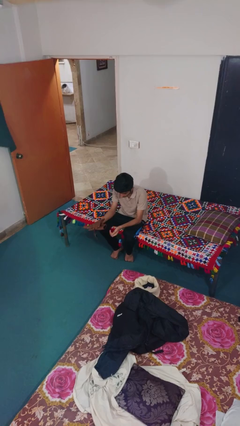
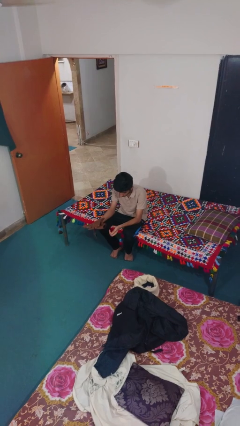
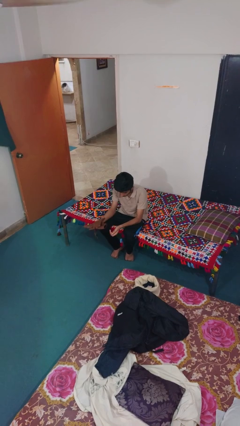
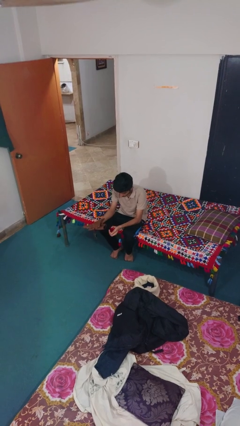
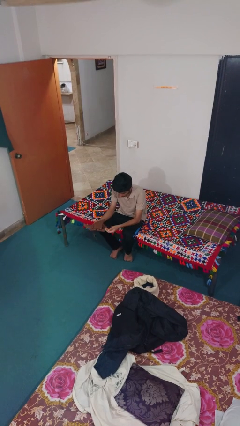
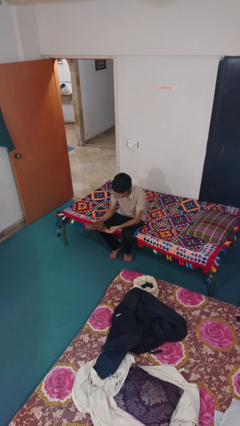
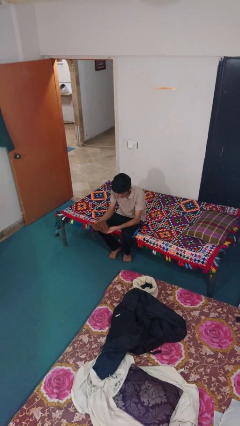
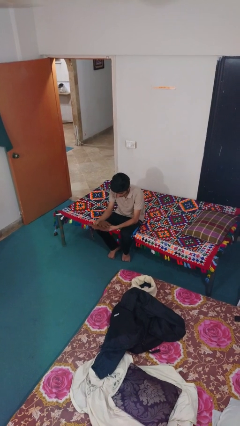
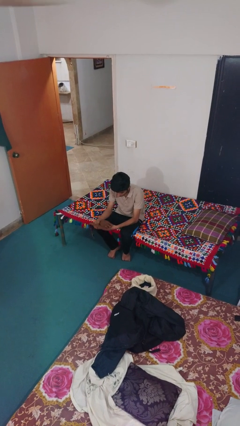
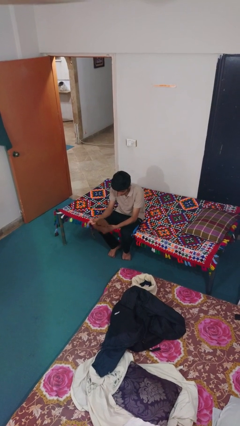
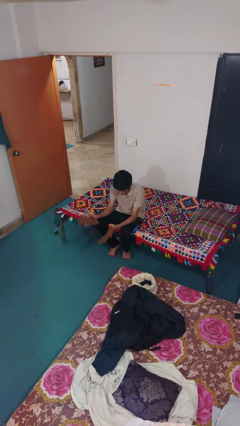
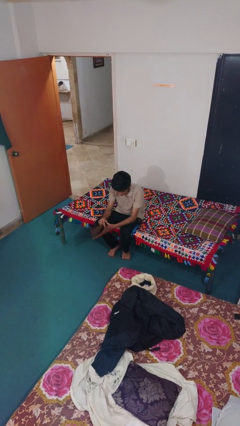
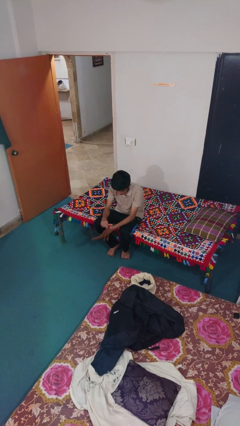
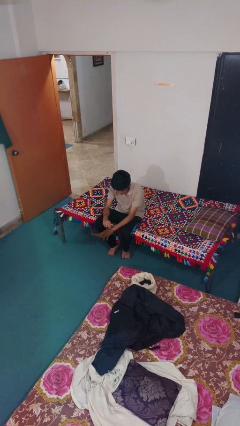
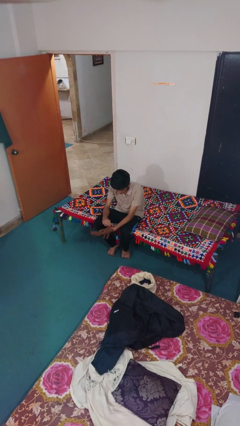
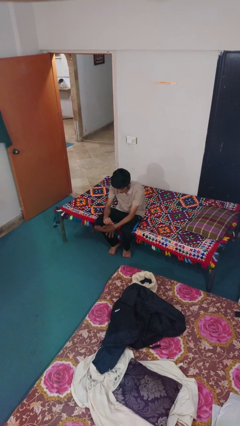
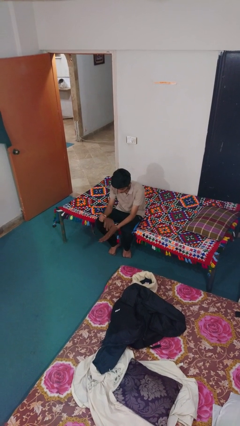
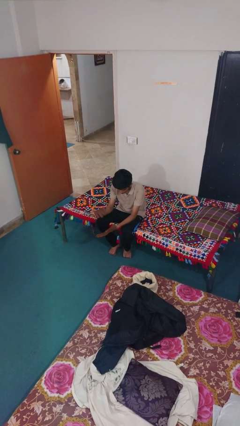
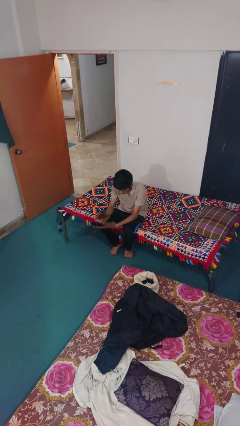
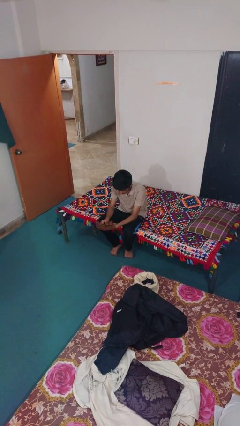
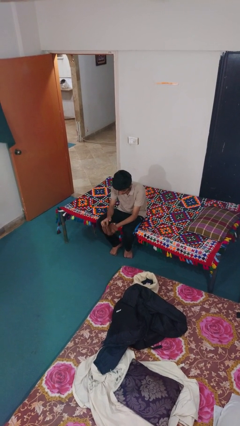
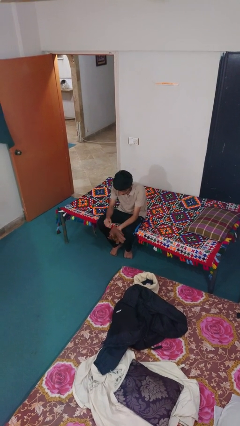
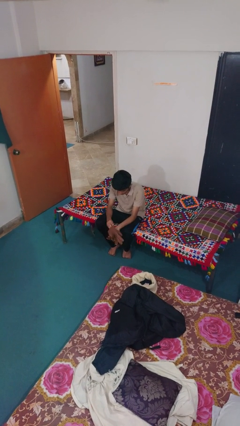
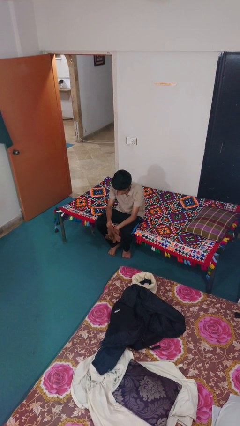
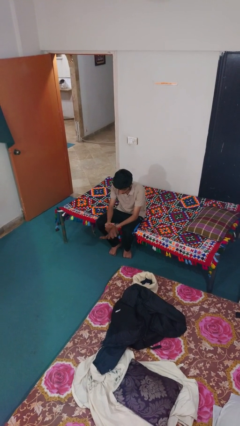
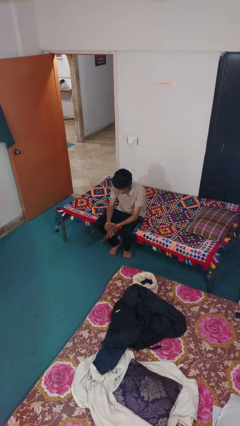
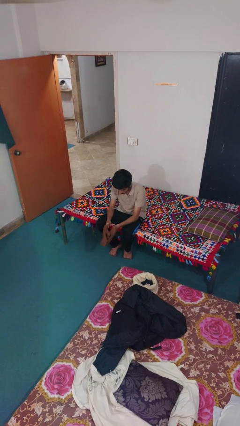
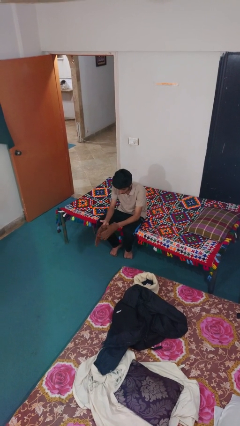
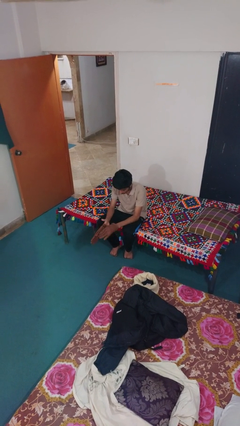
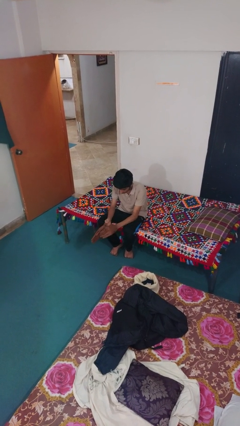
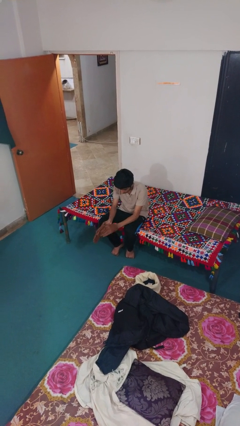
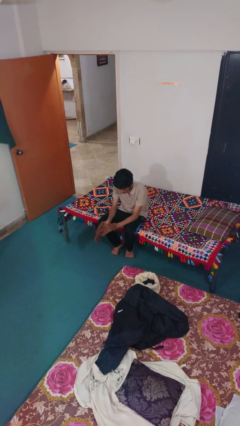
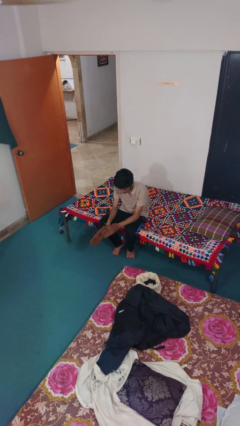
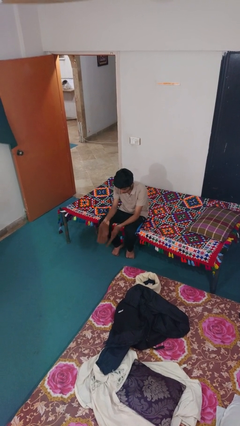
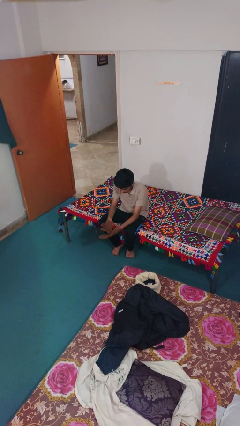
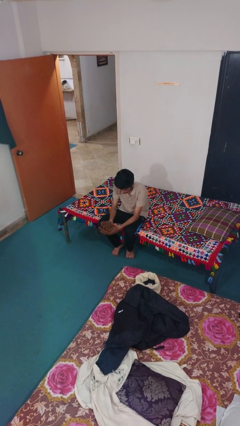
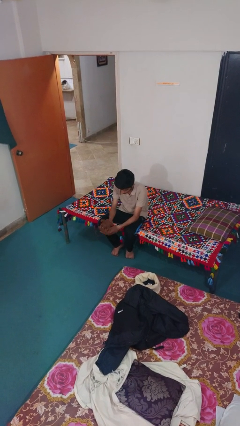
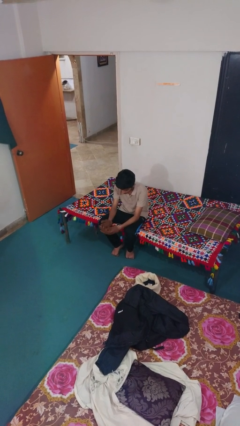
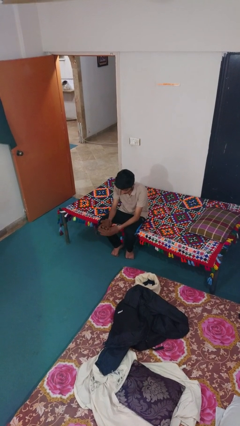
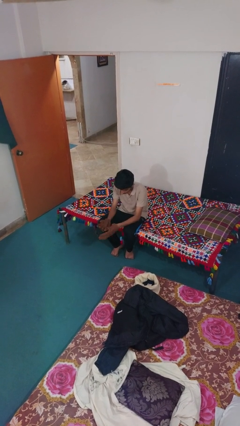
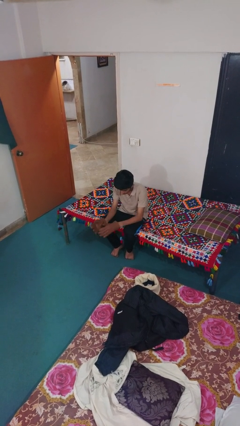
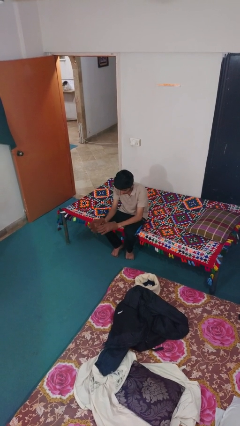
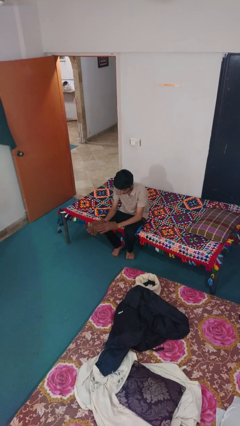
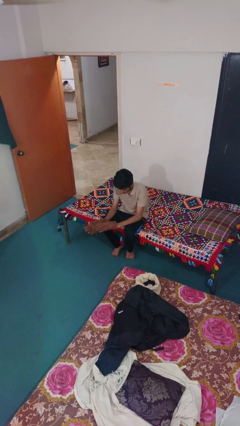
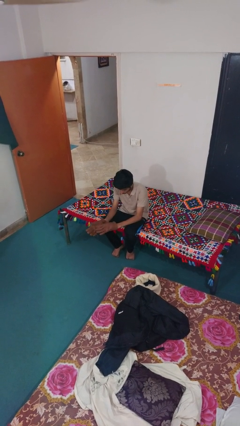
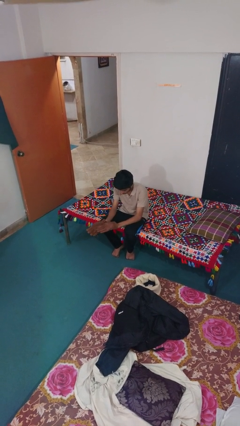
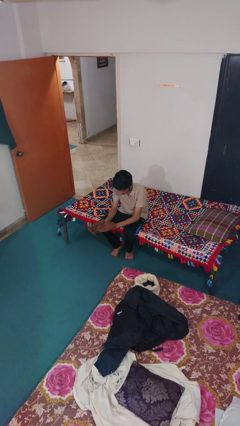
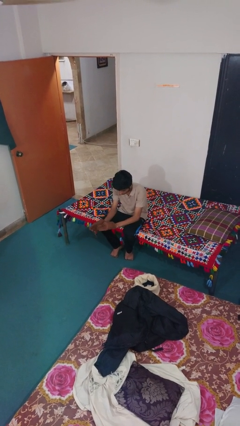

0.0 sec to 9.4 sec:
person puts on gloves

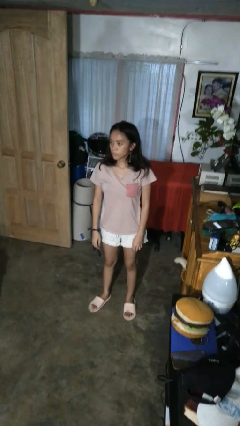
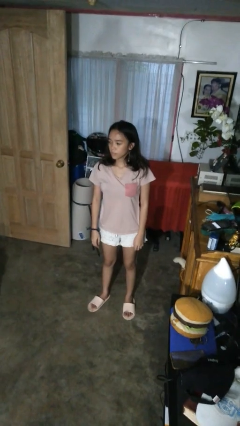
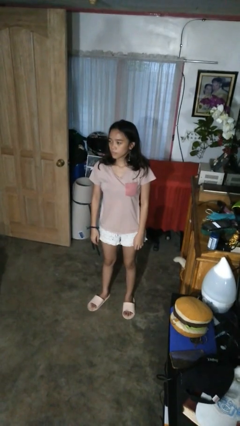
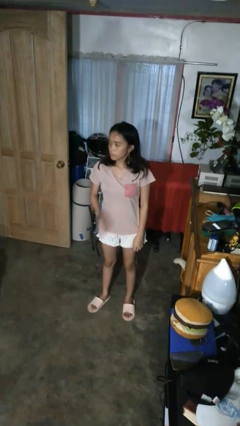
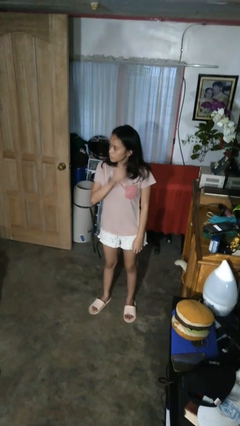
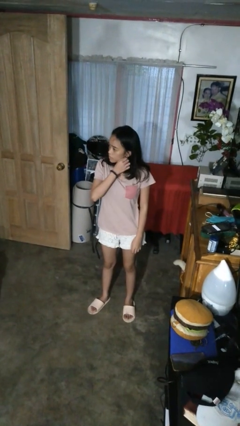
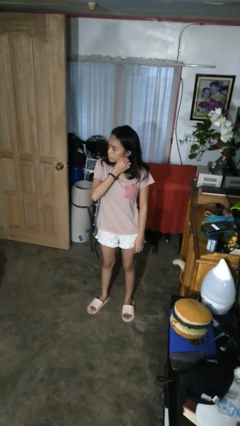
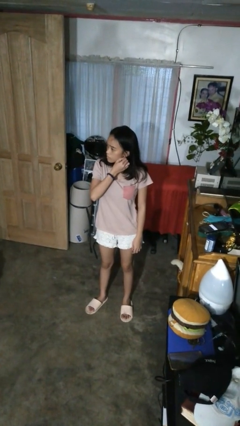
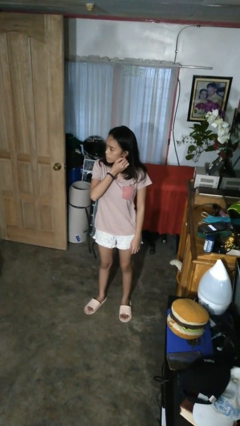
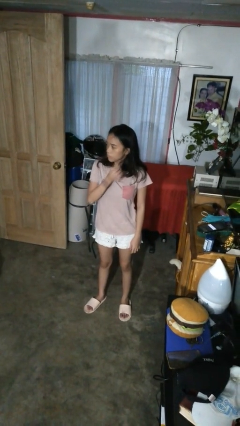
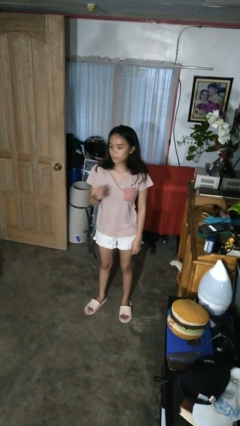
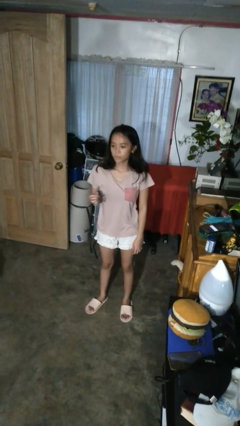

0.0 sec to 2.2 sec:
person takes off earrings

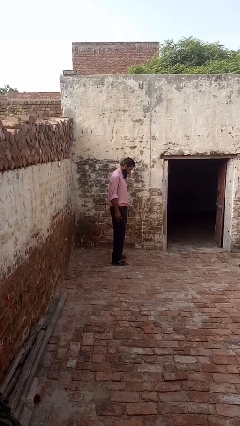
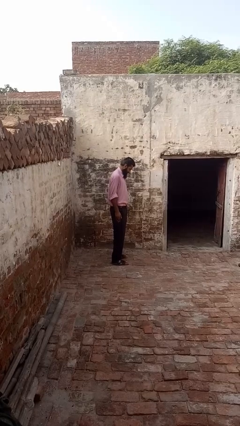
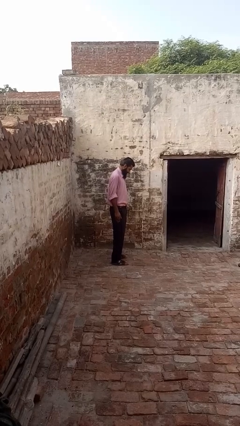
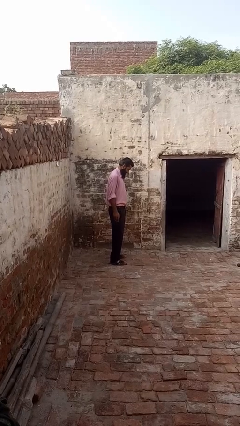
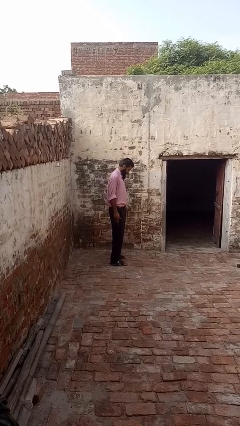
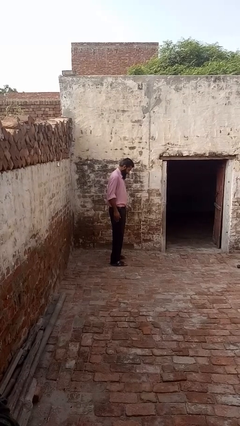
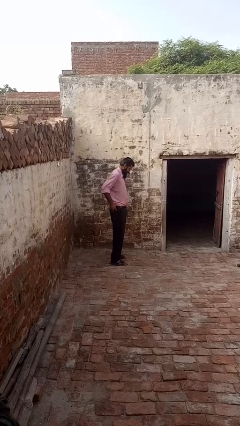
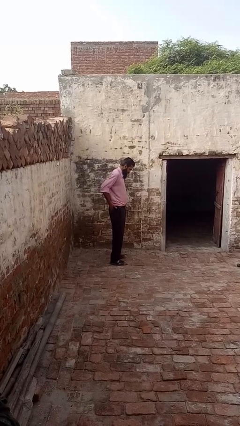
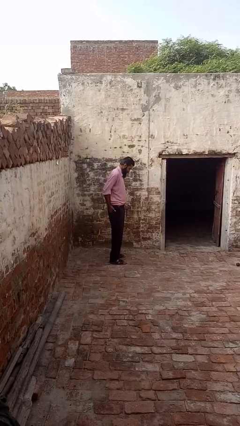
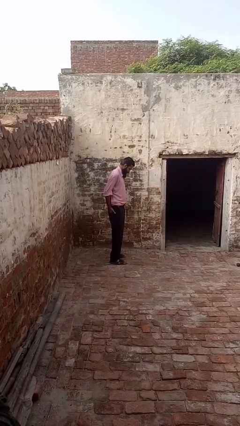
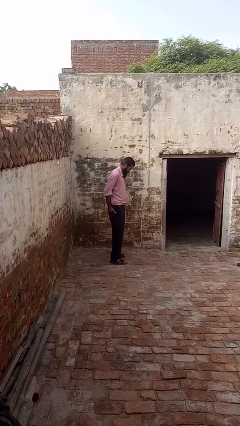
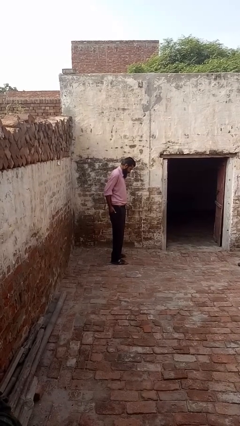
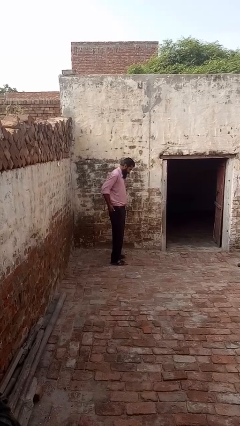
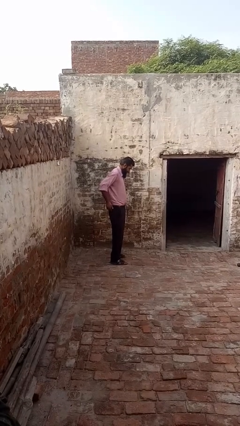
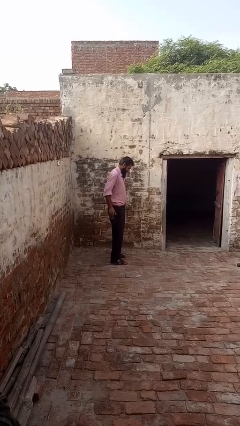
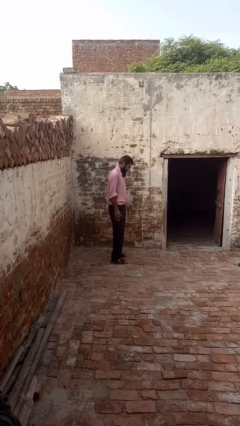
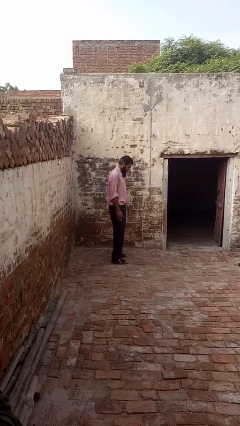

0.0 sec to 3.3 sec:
person puts hands in back pockets

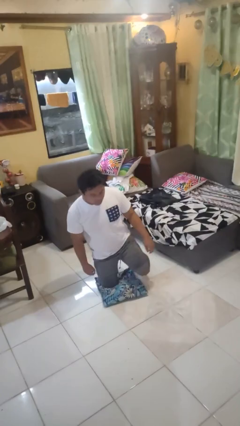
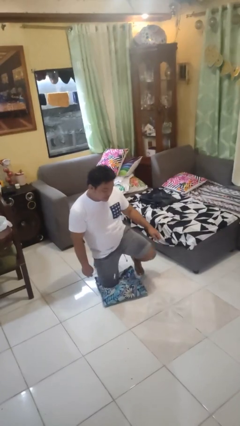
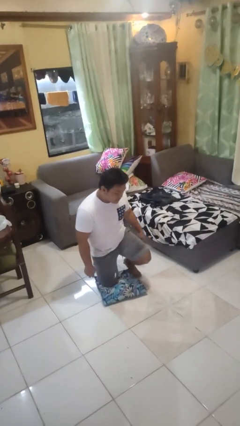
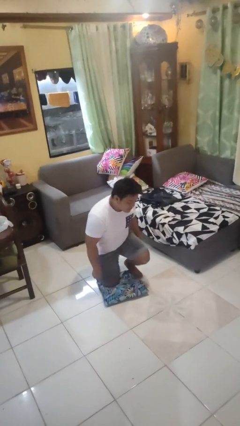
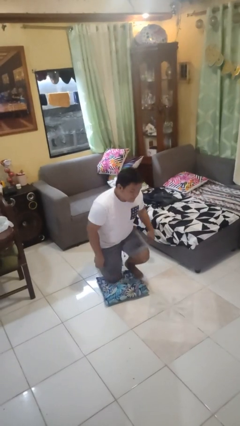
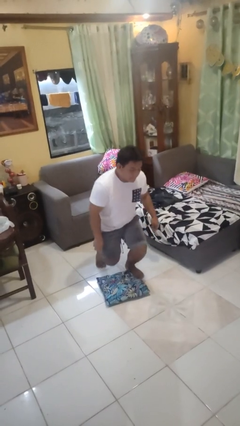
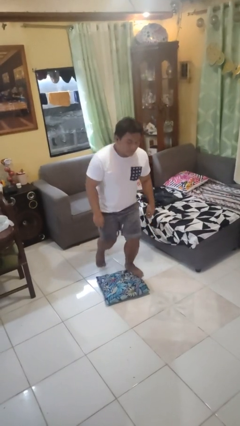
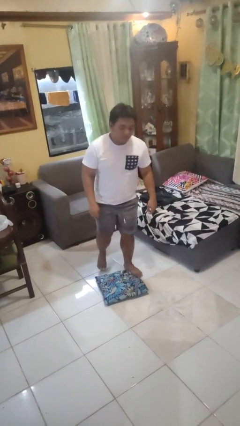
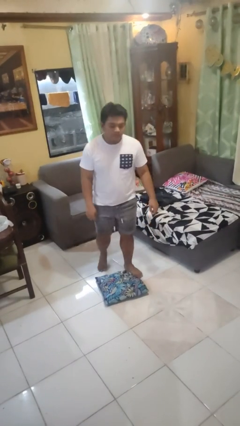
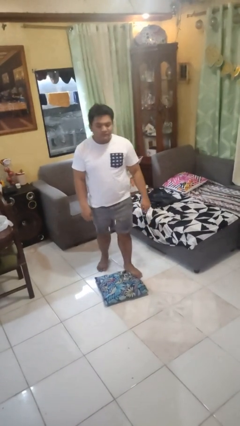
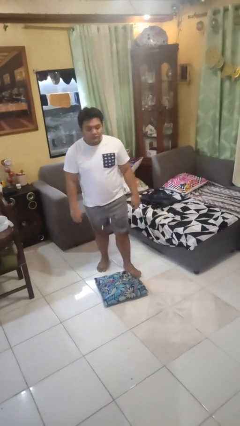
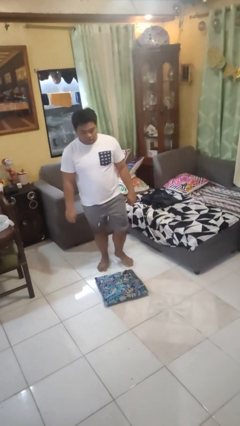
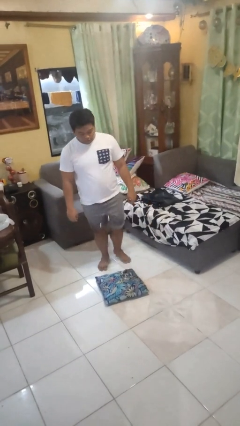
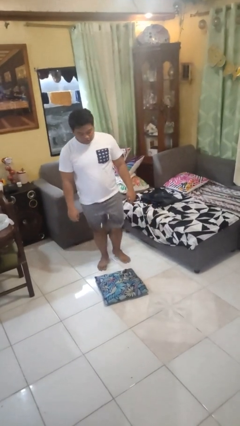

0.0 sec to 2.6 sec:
person stands up from floor

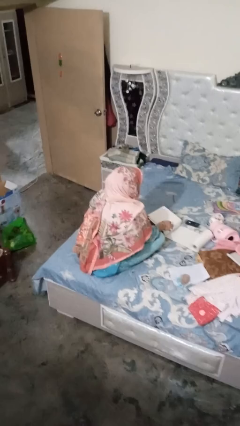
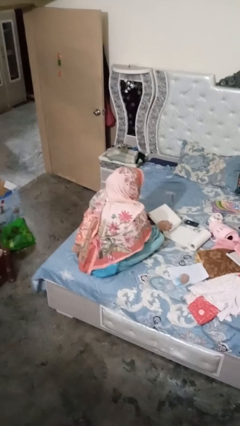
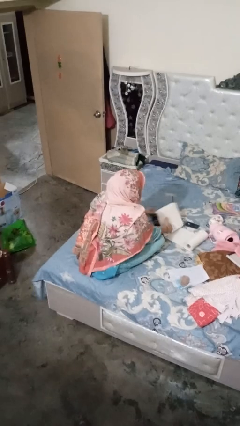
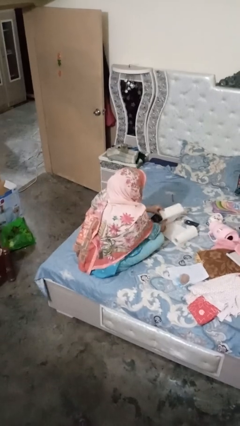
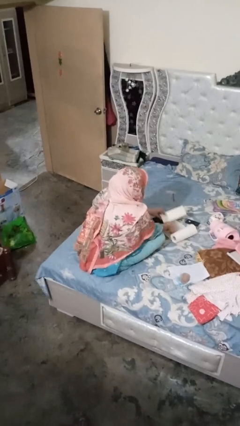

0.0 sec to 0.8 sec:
person wraps box
